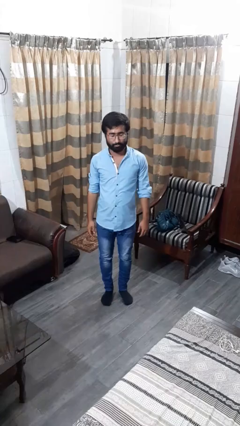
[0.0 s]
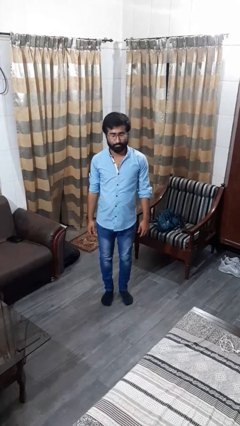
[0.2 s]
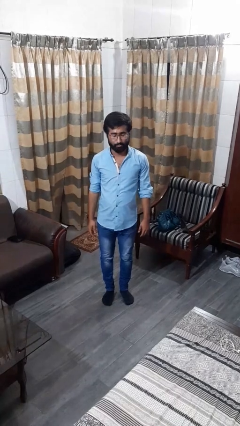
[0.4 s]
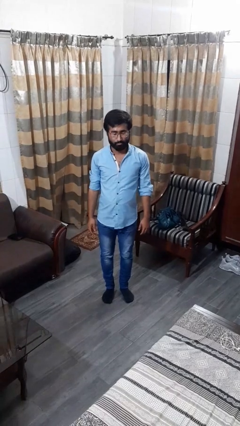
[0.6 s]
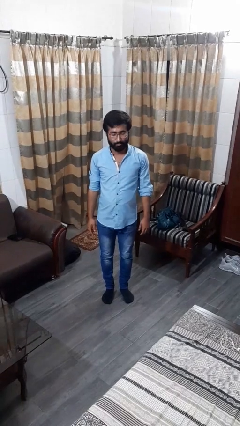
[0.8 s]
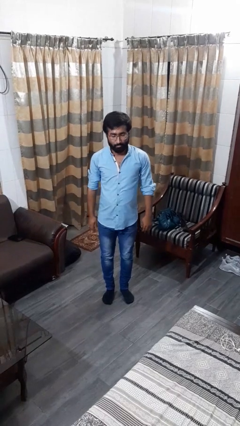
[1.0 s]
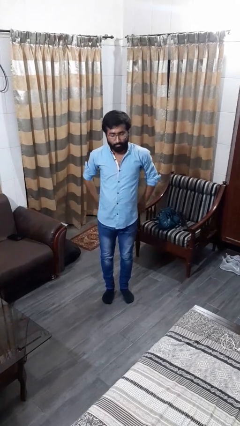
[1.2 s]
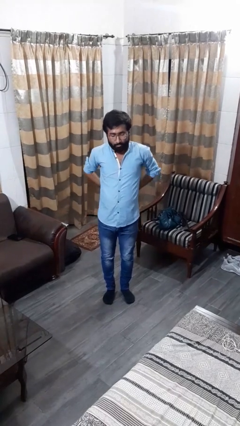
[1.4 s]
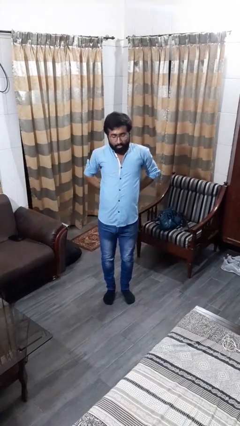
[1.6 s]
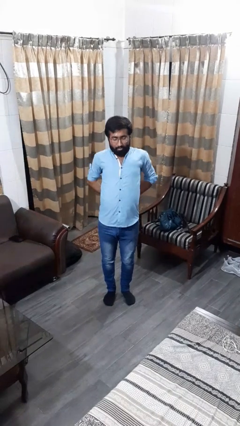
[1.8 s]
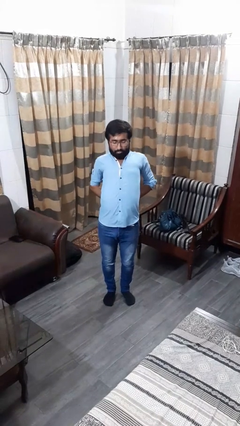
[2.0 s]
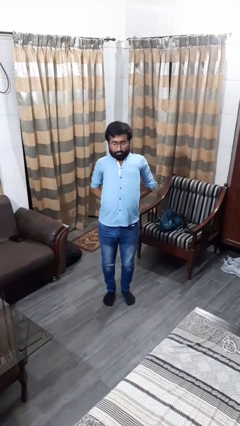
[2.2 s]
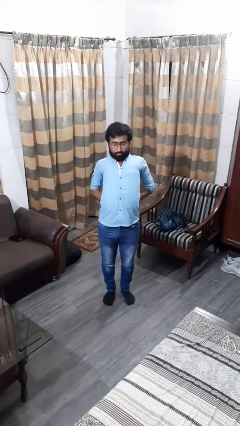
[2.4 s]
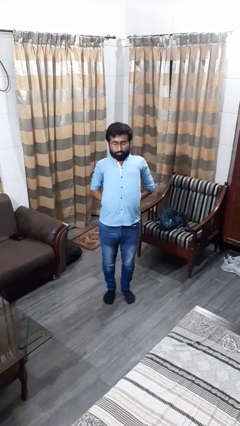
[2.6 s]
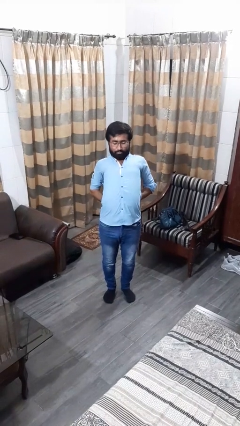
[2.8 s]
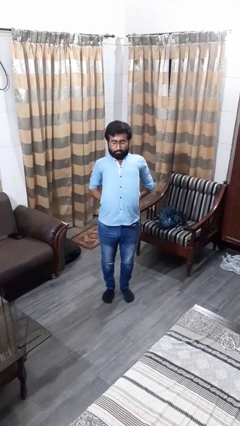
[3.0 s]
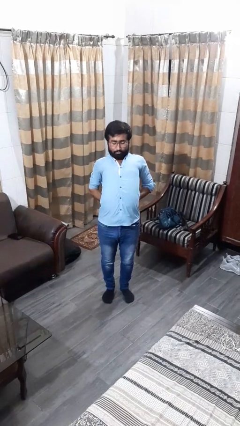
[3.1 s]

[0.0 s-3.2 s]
person stretches back

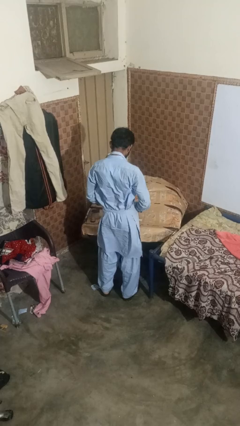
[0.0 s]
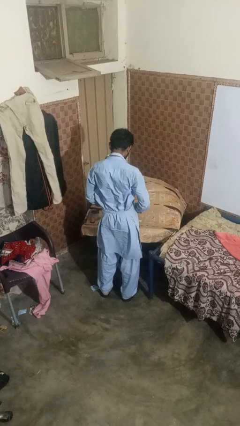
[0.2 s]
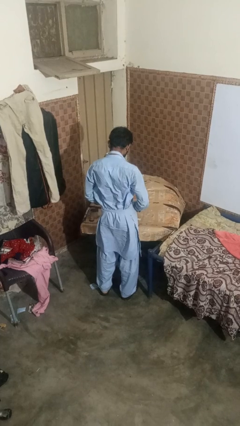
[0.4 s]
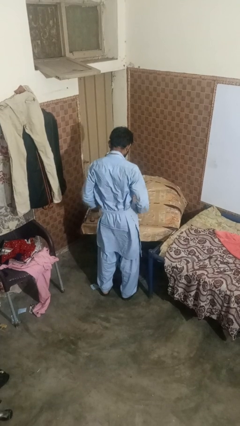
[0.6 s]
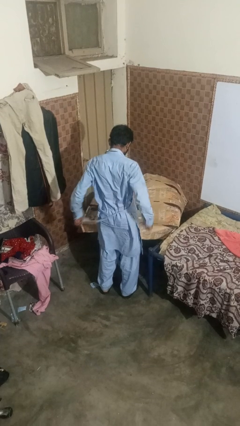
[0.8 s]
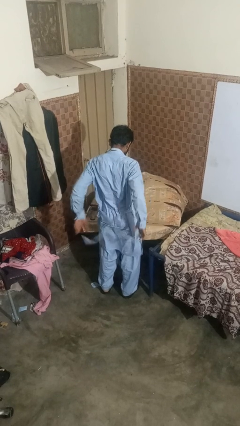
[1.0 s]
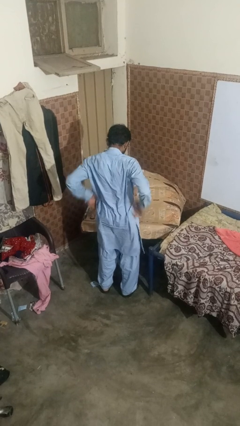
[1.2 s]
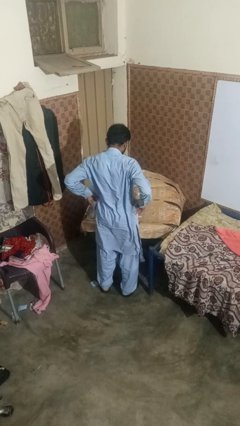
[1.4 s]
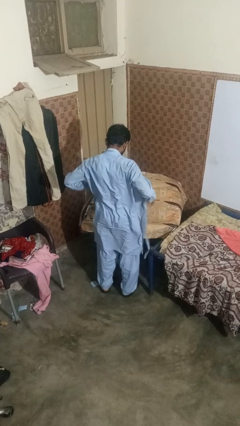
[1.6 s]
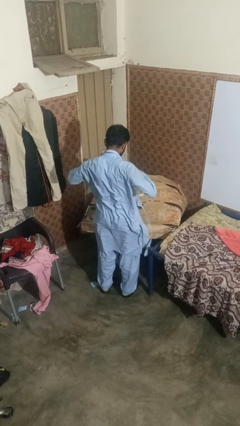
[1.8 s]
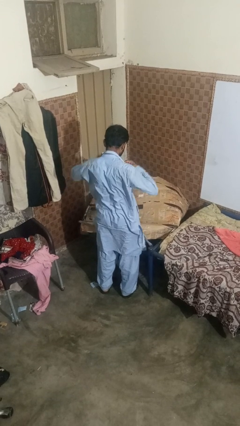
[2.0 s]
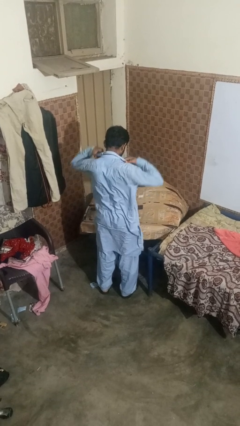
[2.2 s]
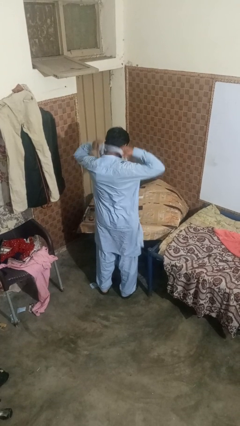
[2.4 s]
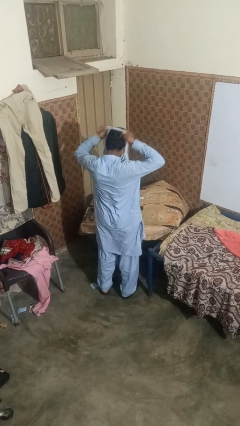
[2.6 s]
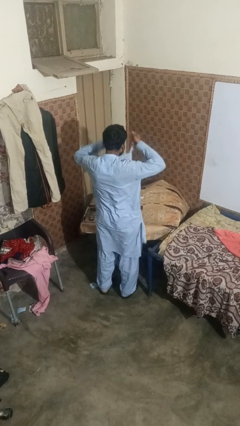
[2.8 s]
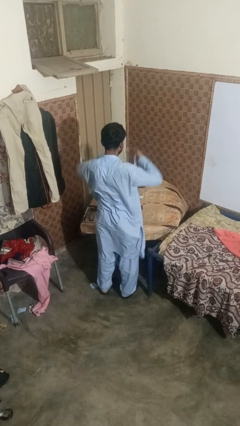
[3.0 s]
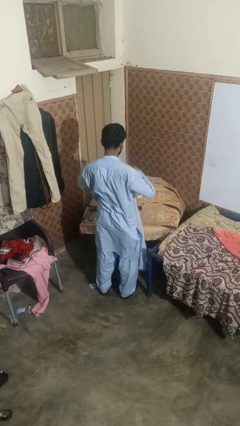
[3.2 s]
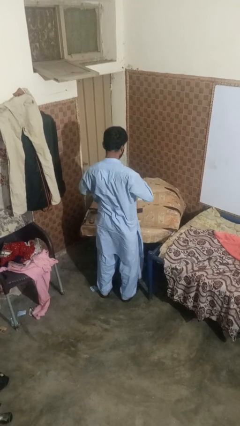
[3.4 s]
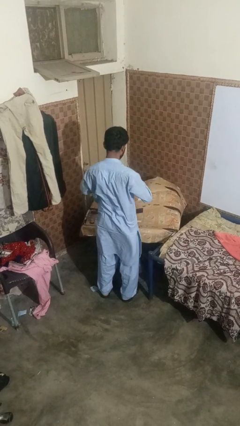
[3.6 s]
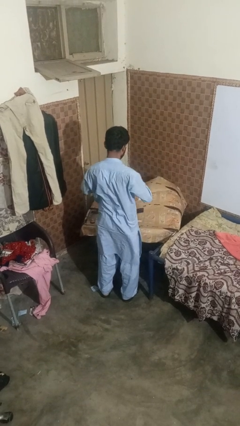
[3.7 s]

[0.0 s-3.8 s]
person takes off apron

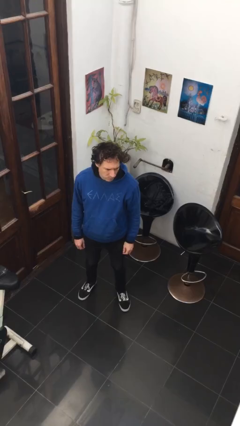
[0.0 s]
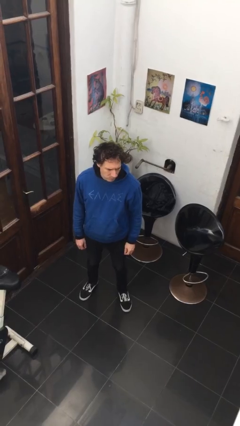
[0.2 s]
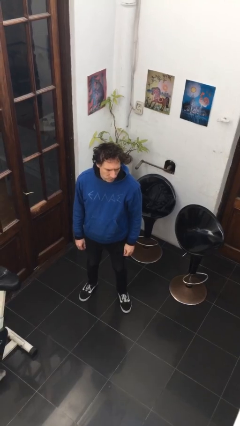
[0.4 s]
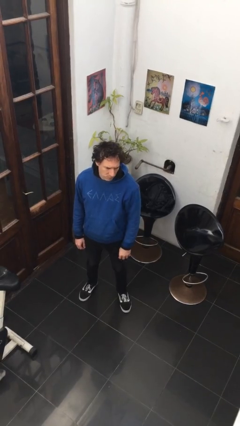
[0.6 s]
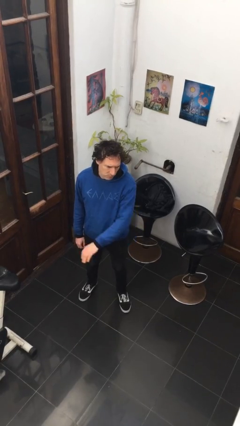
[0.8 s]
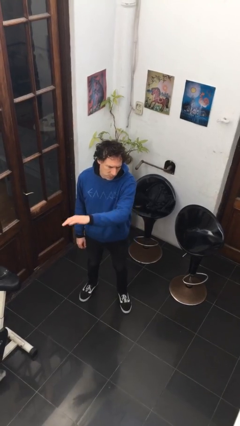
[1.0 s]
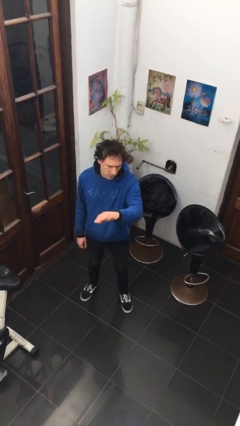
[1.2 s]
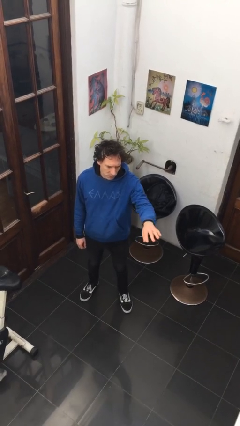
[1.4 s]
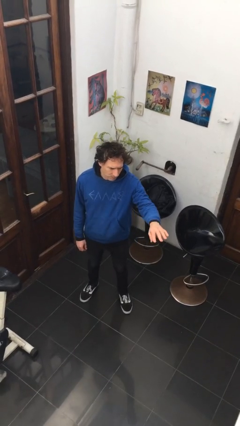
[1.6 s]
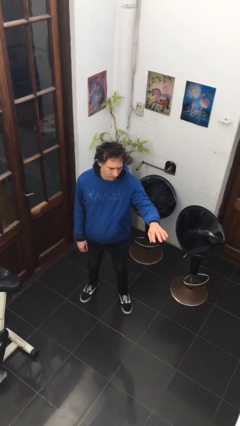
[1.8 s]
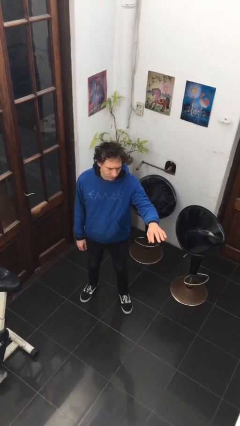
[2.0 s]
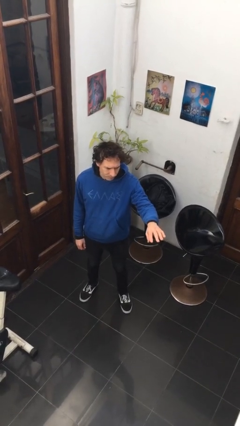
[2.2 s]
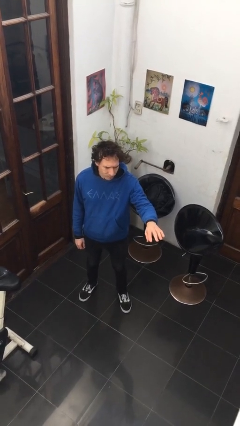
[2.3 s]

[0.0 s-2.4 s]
person gestures swipe left

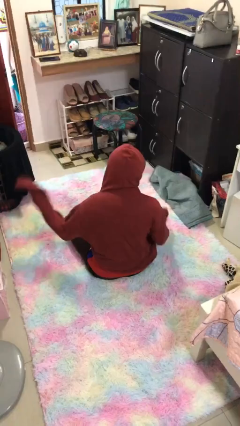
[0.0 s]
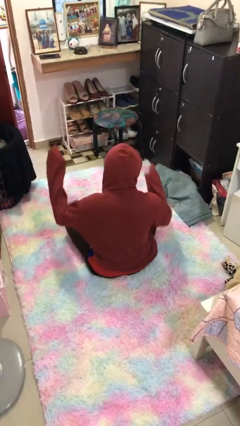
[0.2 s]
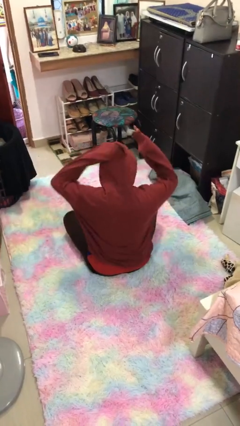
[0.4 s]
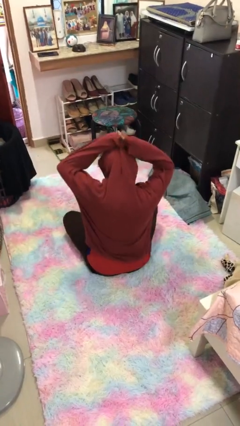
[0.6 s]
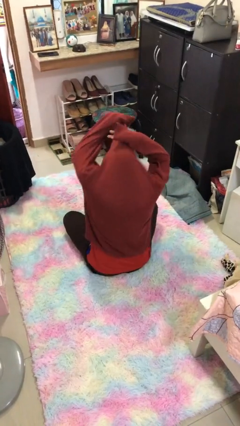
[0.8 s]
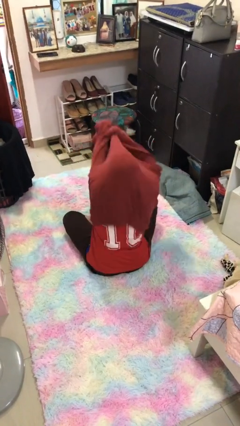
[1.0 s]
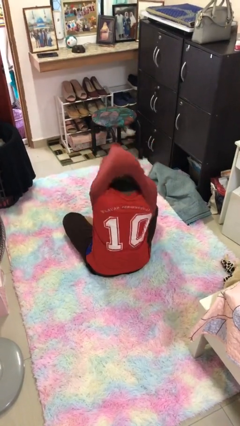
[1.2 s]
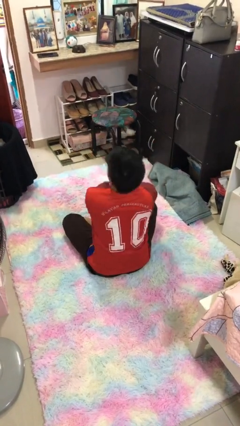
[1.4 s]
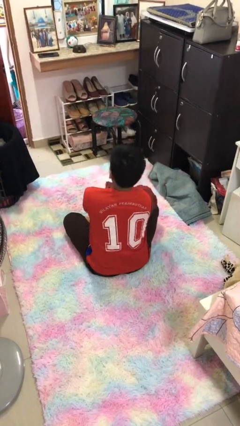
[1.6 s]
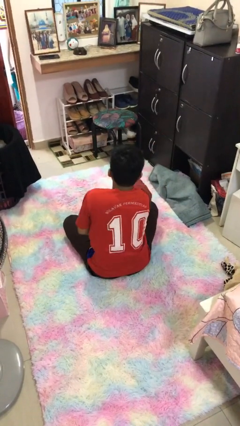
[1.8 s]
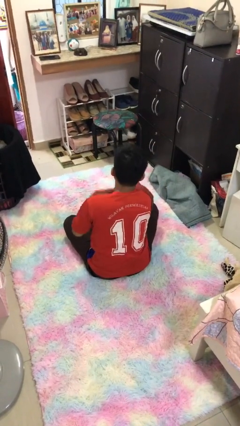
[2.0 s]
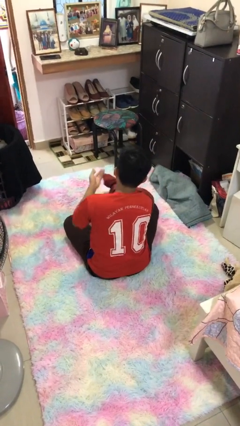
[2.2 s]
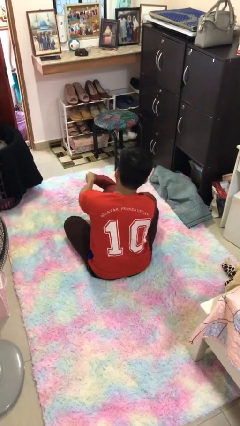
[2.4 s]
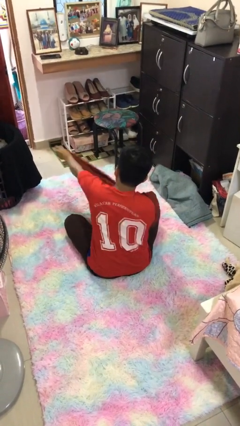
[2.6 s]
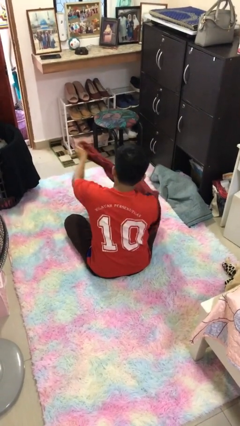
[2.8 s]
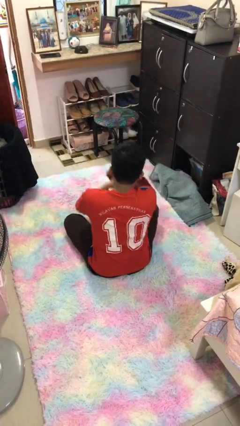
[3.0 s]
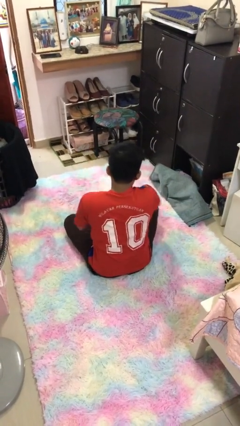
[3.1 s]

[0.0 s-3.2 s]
person takes off hoodie

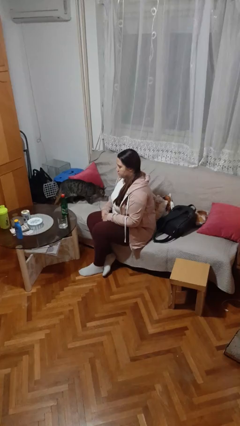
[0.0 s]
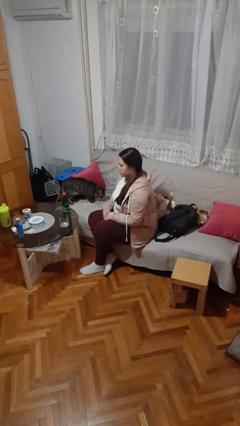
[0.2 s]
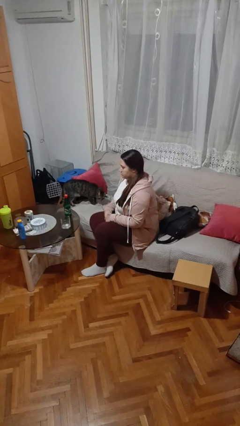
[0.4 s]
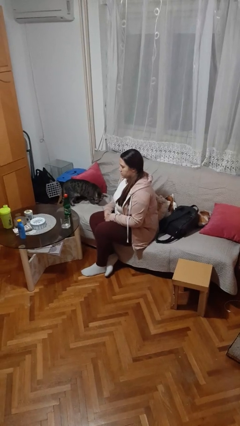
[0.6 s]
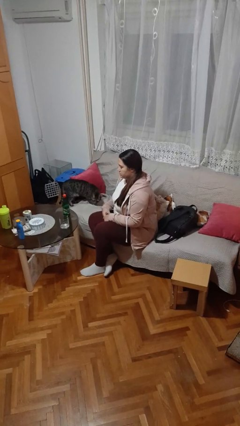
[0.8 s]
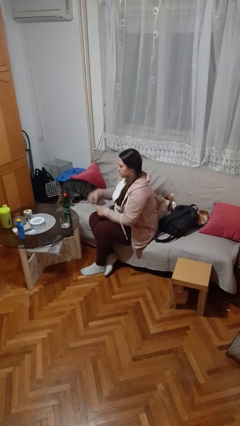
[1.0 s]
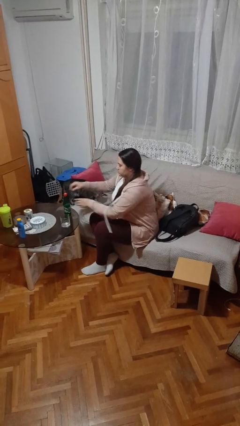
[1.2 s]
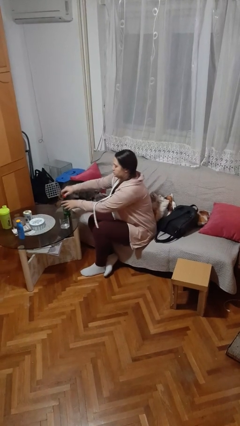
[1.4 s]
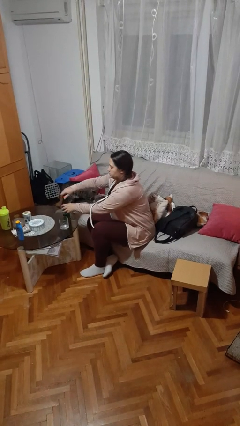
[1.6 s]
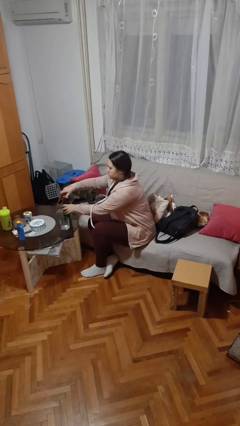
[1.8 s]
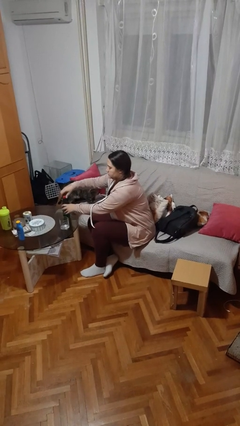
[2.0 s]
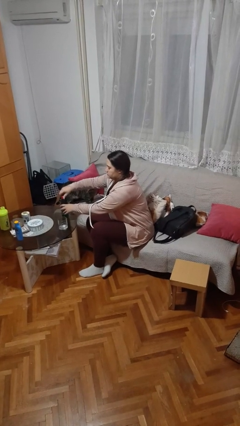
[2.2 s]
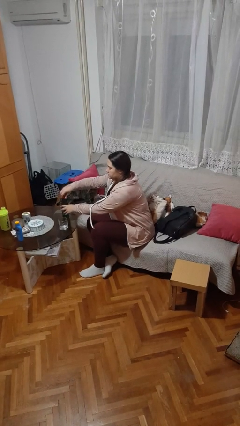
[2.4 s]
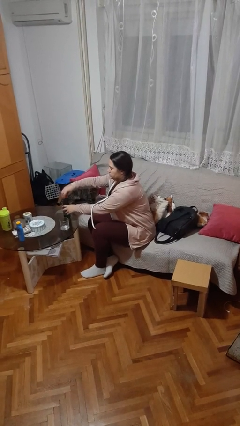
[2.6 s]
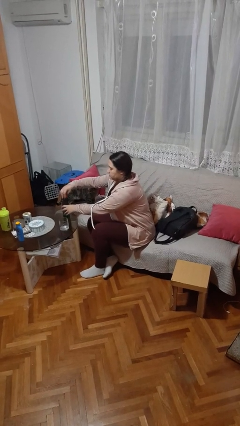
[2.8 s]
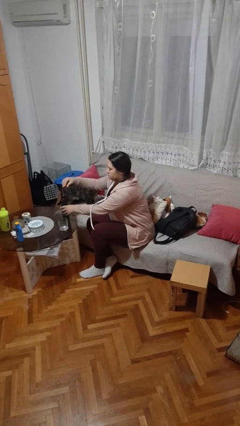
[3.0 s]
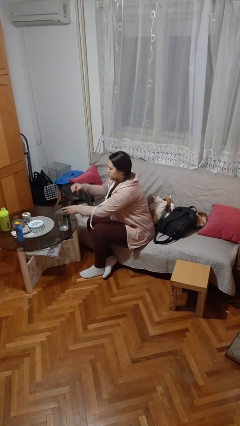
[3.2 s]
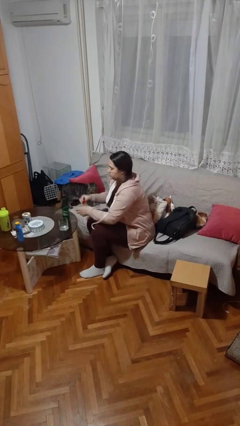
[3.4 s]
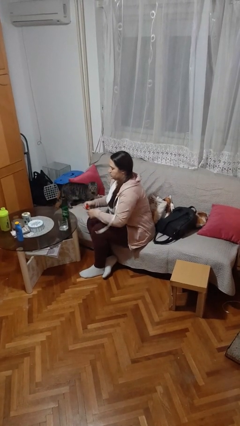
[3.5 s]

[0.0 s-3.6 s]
person unscrews lid from bottle

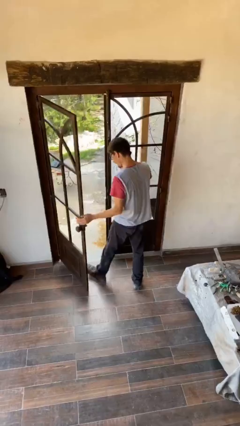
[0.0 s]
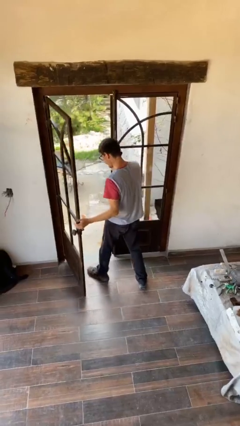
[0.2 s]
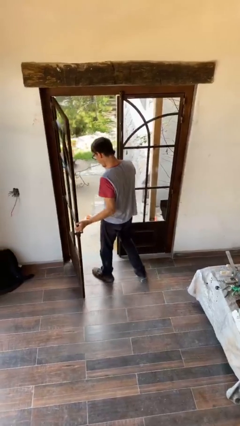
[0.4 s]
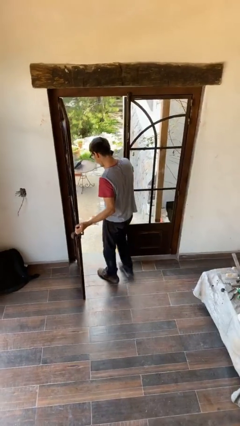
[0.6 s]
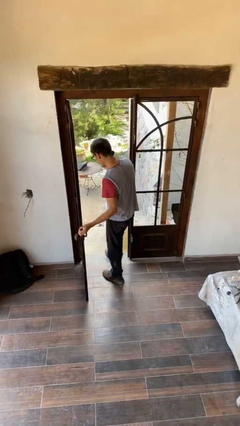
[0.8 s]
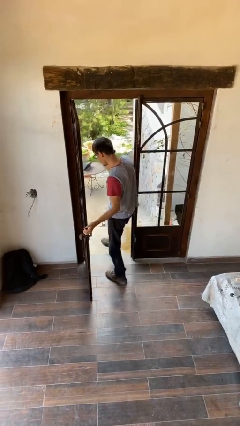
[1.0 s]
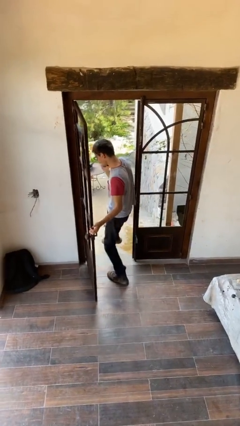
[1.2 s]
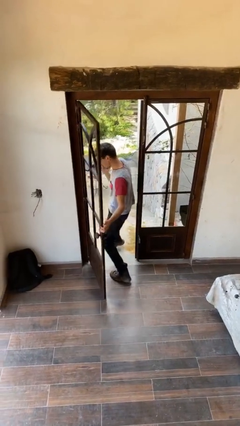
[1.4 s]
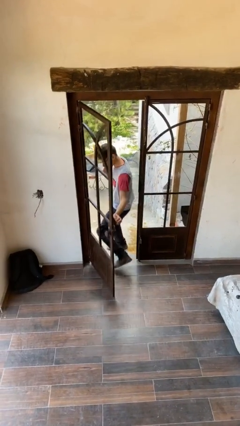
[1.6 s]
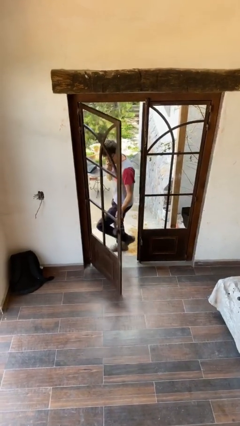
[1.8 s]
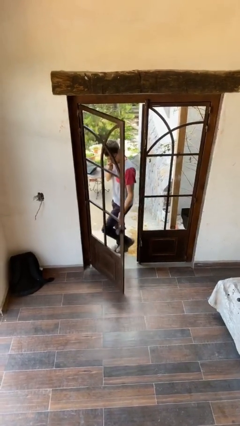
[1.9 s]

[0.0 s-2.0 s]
person exits scene through structure
